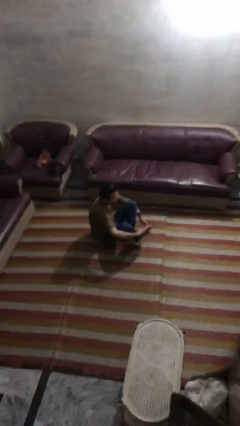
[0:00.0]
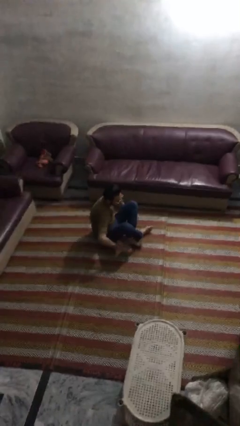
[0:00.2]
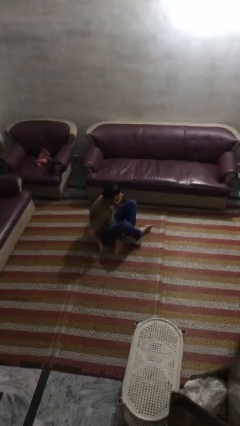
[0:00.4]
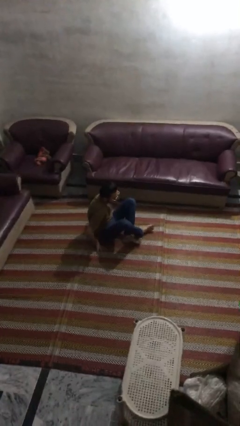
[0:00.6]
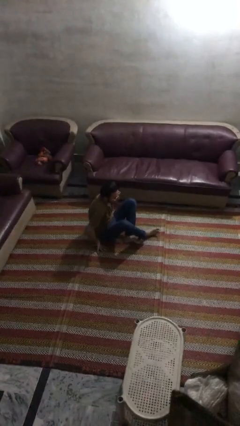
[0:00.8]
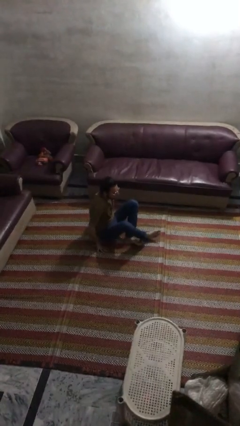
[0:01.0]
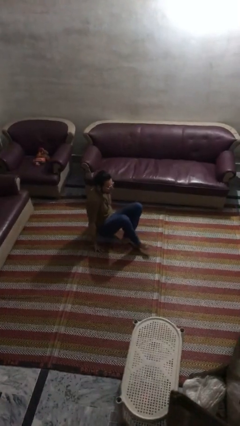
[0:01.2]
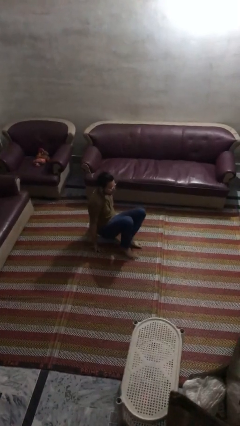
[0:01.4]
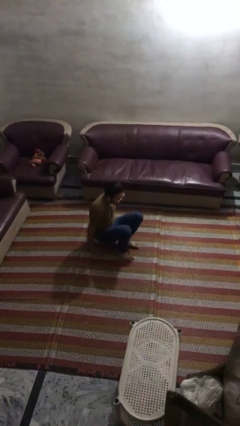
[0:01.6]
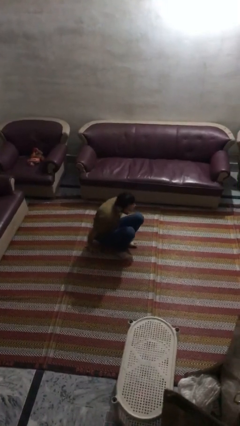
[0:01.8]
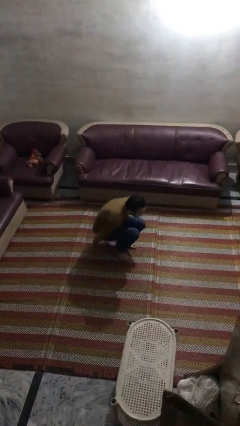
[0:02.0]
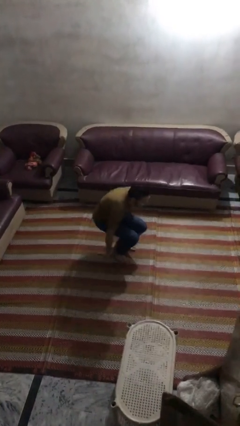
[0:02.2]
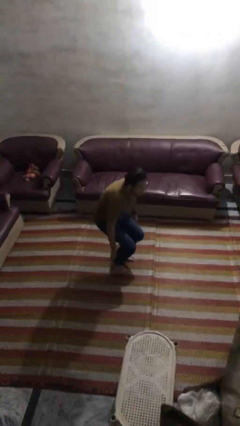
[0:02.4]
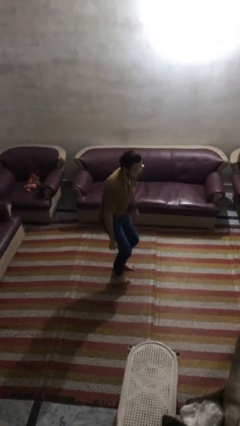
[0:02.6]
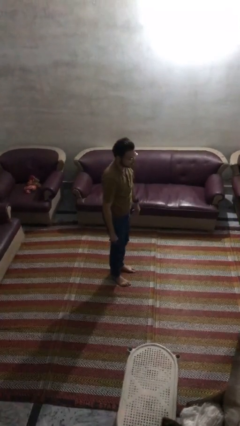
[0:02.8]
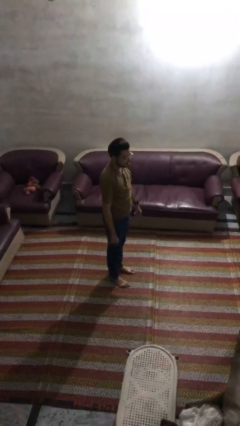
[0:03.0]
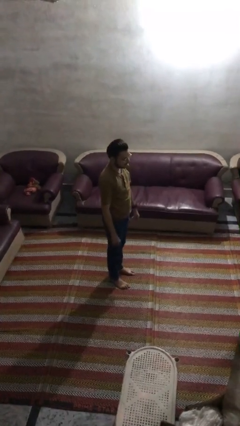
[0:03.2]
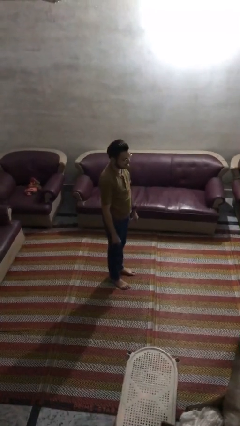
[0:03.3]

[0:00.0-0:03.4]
person stands up from floor

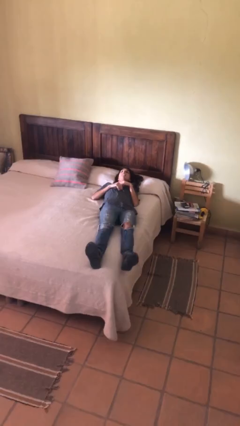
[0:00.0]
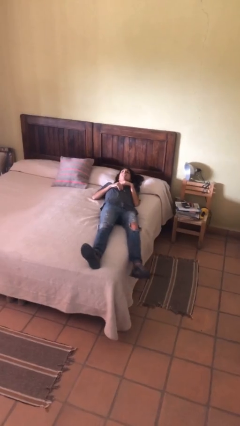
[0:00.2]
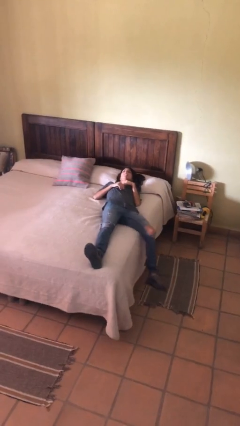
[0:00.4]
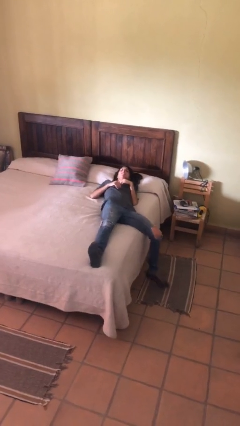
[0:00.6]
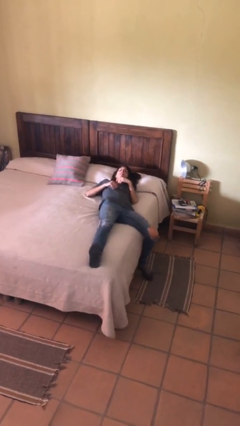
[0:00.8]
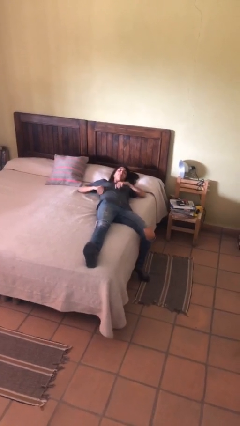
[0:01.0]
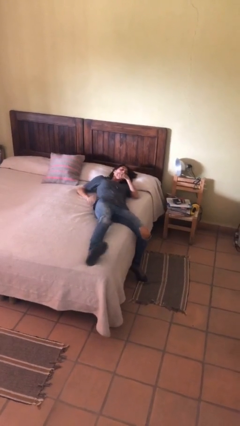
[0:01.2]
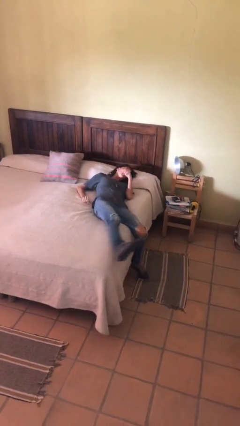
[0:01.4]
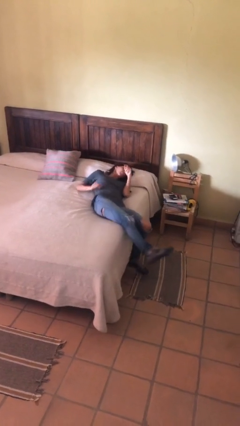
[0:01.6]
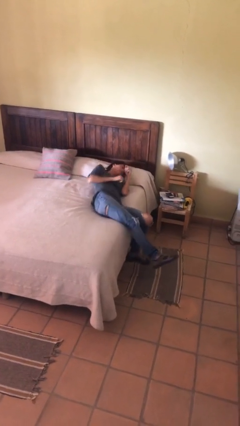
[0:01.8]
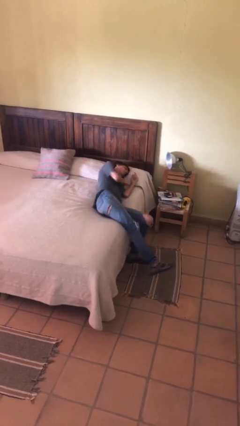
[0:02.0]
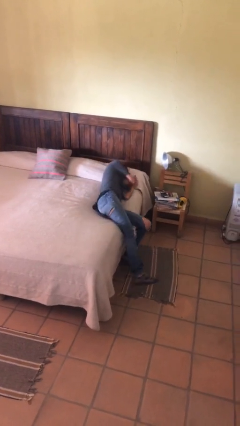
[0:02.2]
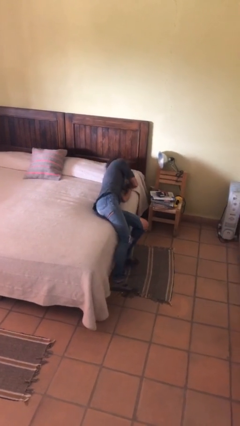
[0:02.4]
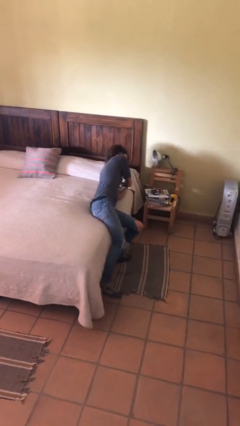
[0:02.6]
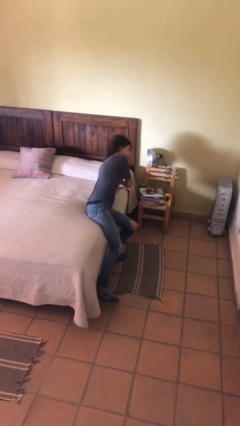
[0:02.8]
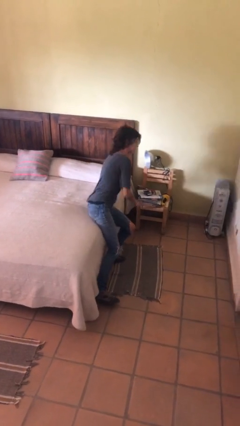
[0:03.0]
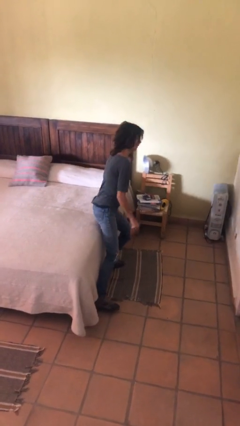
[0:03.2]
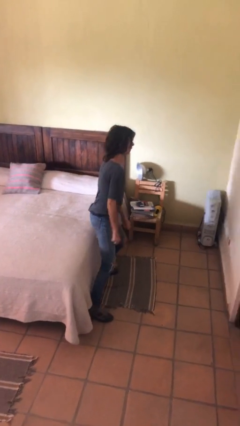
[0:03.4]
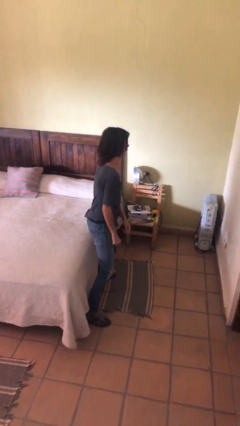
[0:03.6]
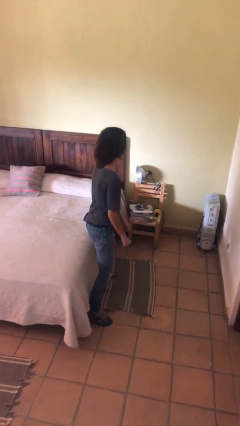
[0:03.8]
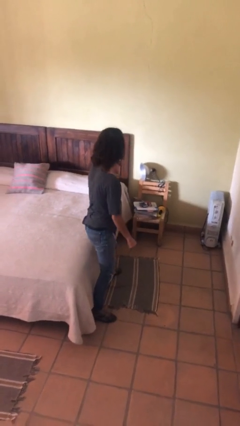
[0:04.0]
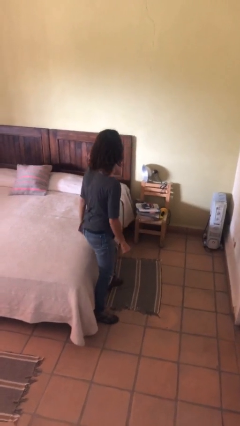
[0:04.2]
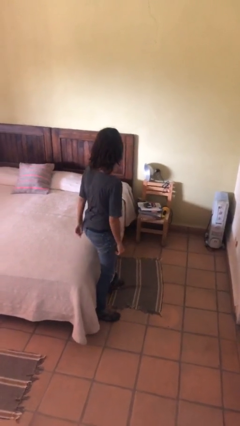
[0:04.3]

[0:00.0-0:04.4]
person stands up

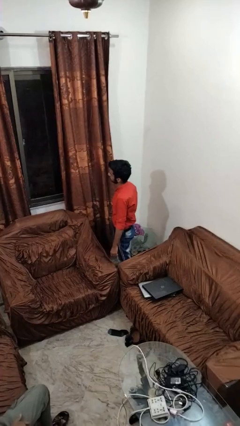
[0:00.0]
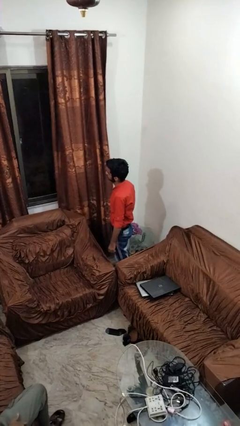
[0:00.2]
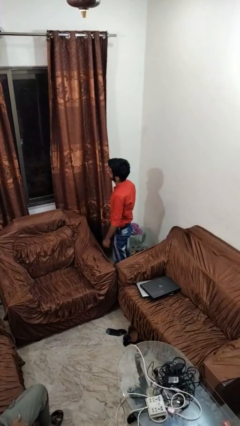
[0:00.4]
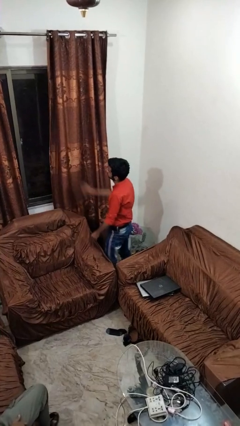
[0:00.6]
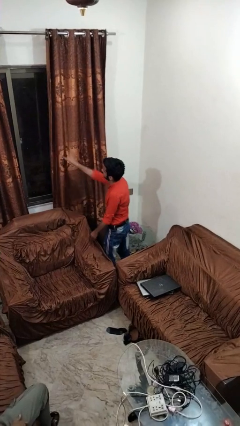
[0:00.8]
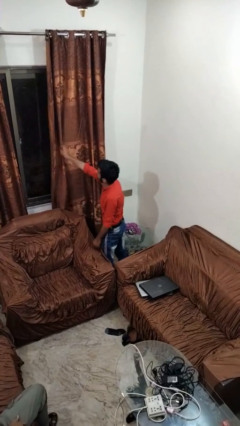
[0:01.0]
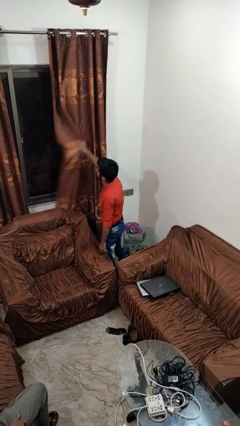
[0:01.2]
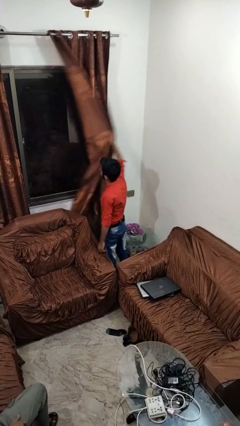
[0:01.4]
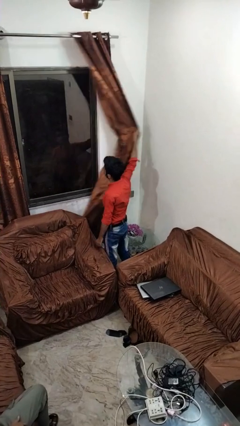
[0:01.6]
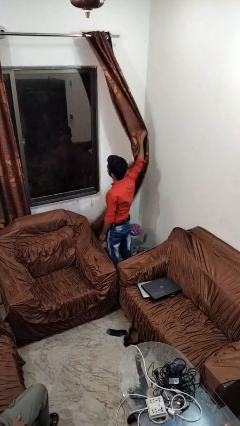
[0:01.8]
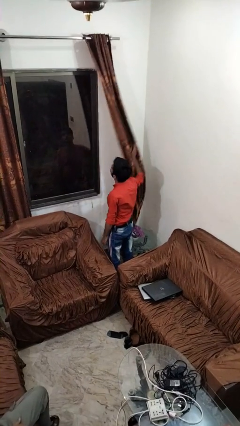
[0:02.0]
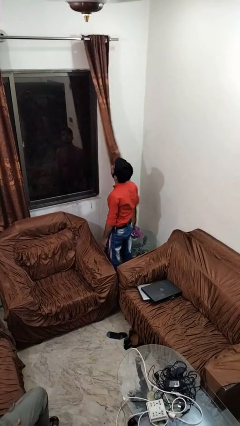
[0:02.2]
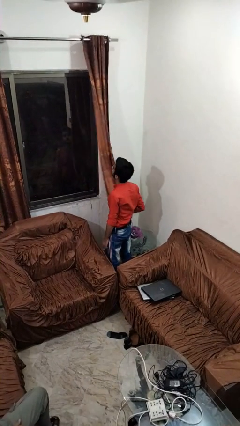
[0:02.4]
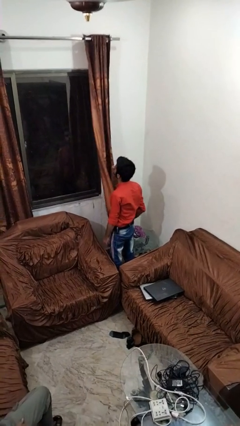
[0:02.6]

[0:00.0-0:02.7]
person opens curtains

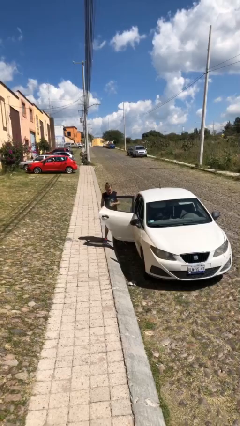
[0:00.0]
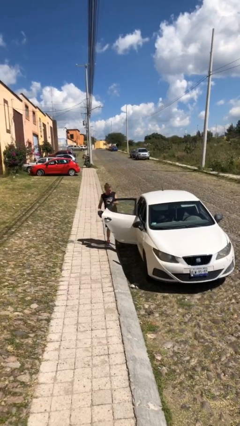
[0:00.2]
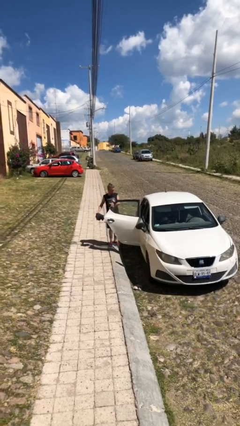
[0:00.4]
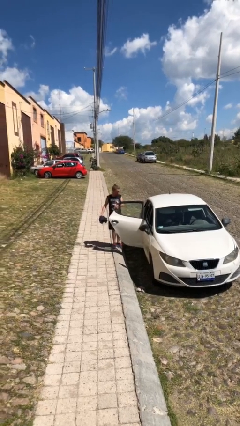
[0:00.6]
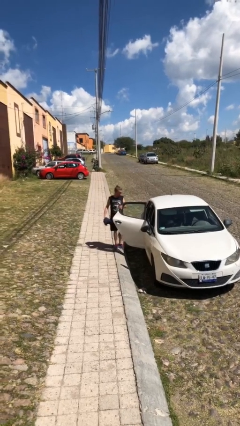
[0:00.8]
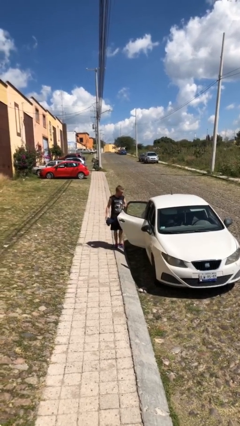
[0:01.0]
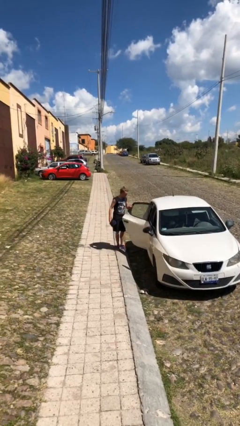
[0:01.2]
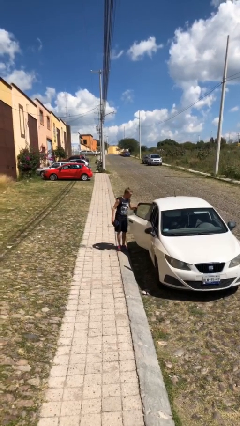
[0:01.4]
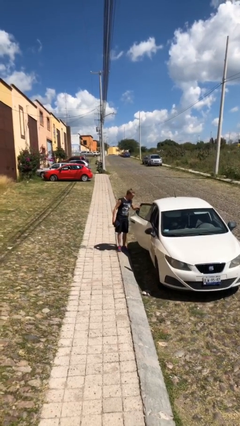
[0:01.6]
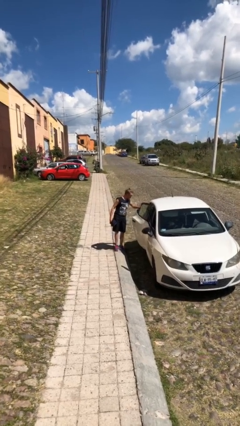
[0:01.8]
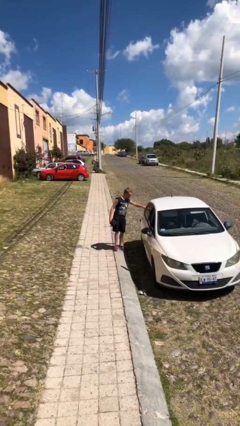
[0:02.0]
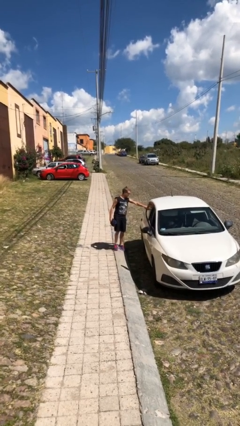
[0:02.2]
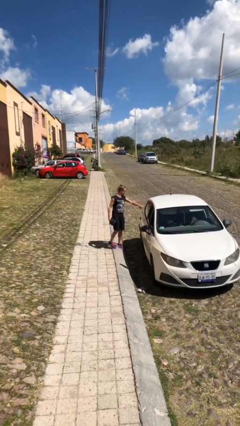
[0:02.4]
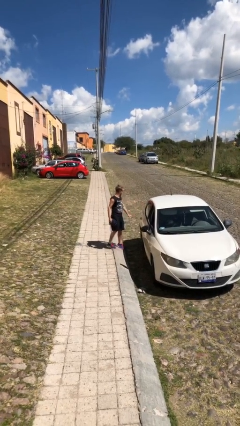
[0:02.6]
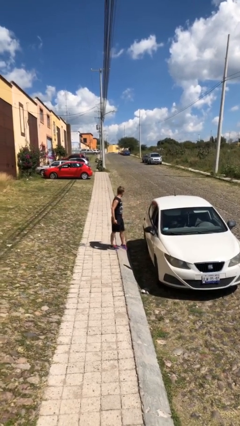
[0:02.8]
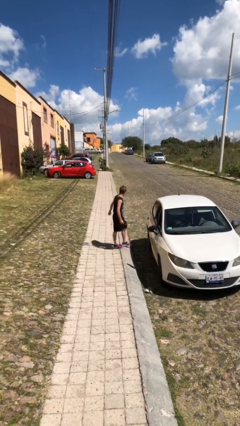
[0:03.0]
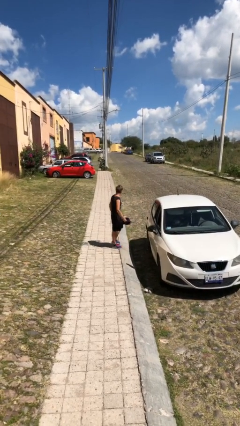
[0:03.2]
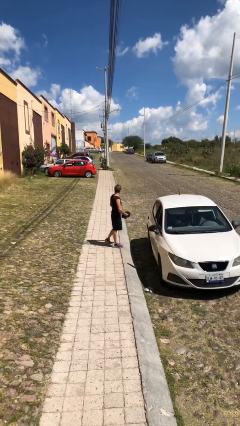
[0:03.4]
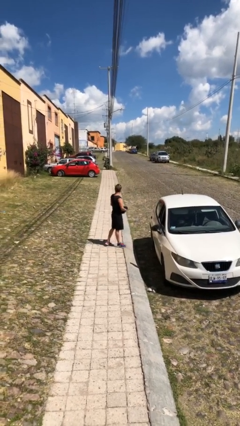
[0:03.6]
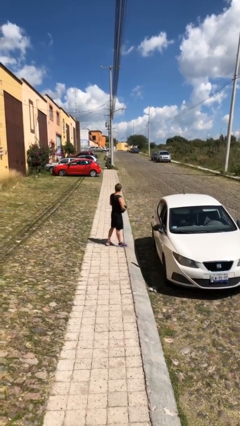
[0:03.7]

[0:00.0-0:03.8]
person closes car door

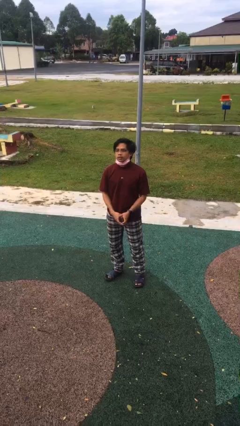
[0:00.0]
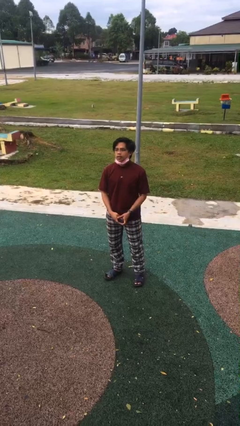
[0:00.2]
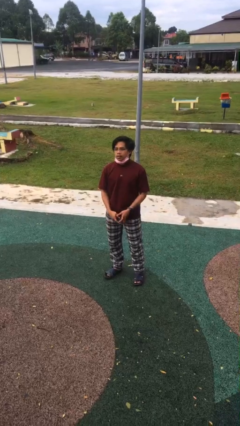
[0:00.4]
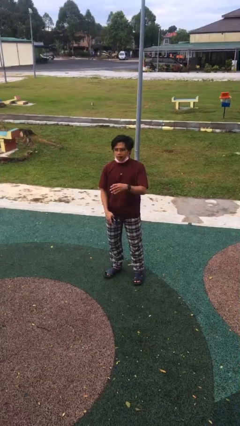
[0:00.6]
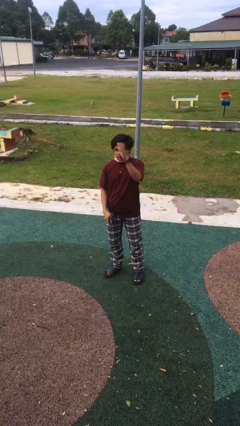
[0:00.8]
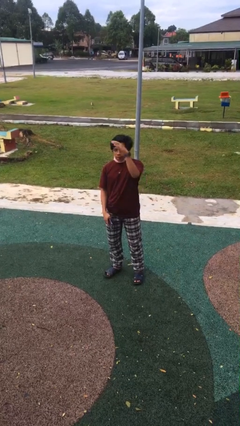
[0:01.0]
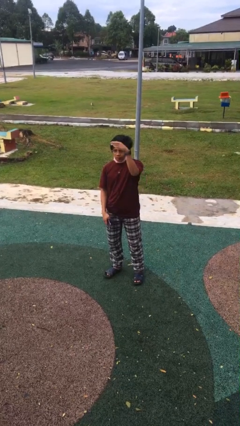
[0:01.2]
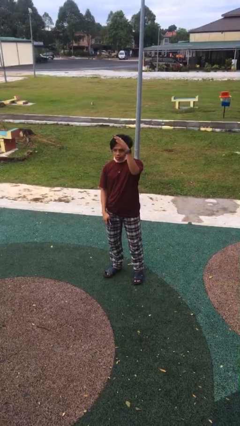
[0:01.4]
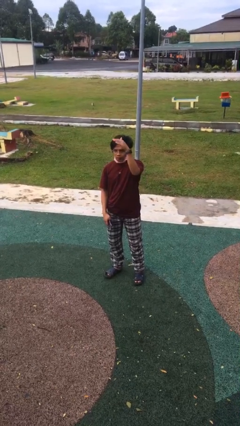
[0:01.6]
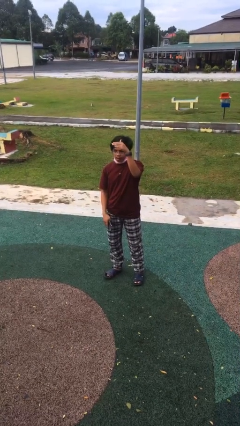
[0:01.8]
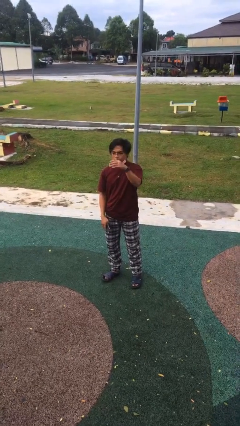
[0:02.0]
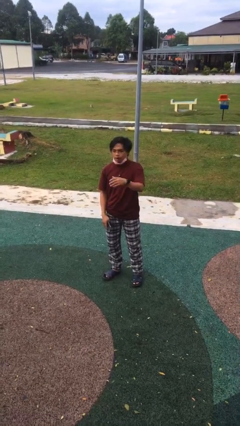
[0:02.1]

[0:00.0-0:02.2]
person gestures come here

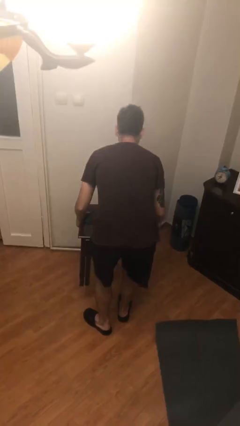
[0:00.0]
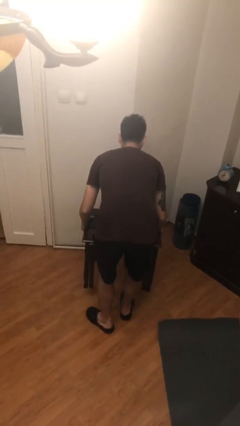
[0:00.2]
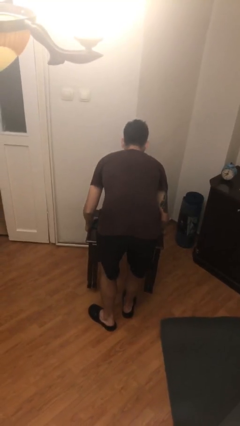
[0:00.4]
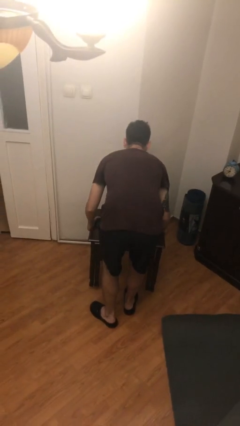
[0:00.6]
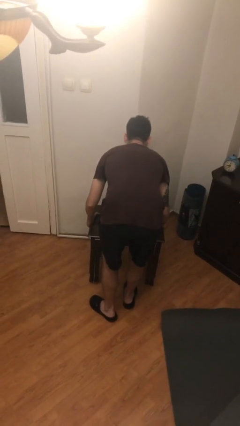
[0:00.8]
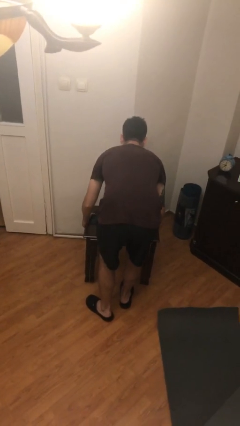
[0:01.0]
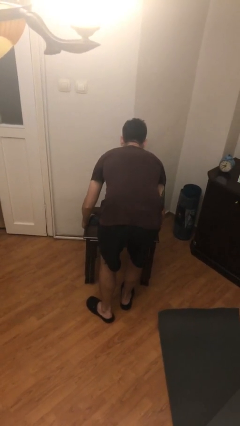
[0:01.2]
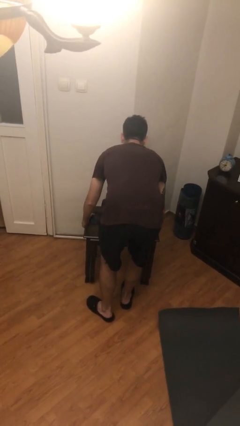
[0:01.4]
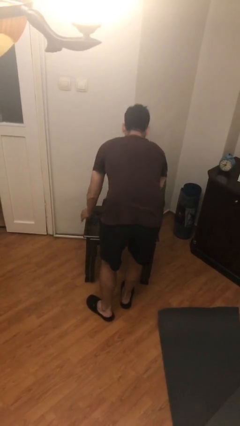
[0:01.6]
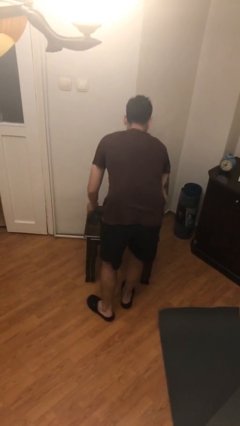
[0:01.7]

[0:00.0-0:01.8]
person puts down object on floor
